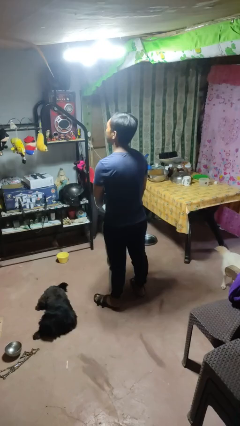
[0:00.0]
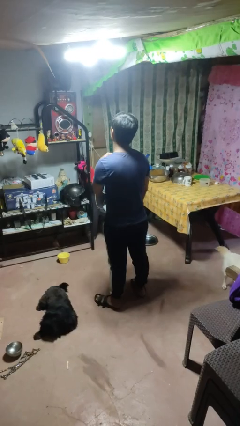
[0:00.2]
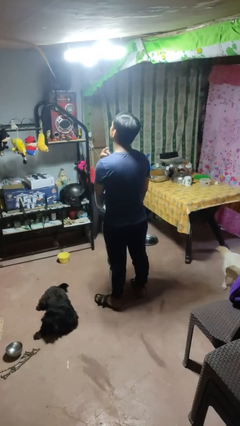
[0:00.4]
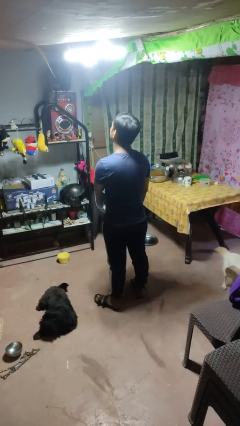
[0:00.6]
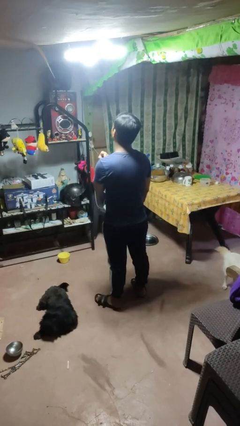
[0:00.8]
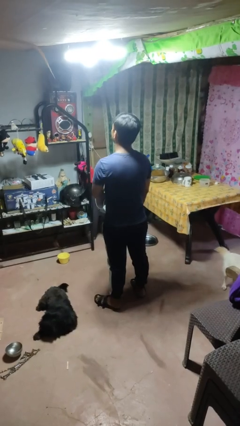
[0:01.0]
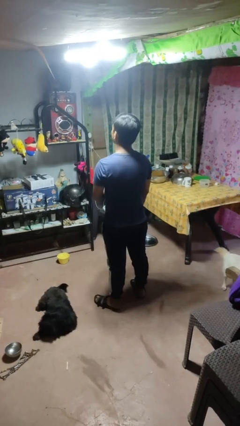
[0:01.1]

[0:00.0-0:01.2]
person gestures cut

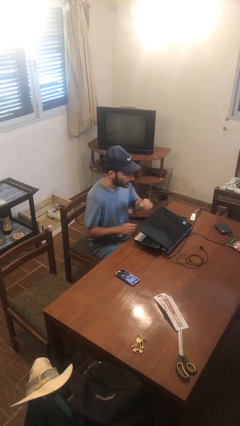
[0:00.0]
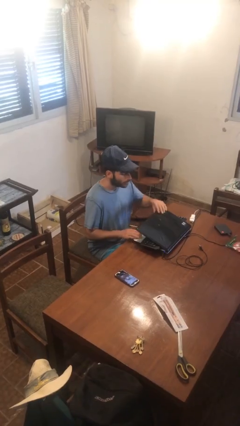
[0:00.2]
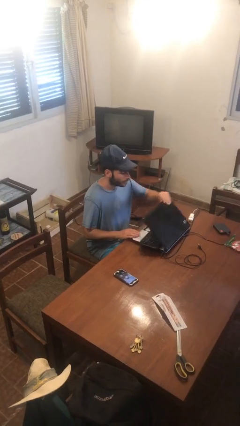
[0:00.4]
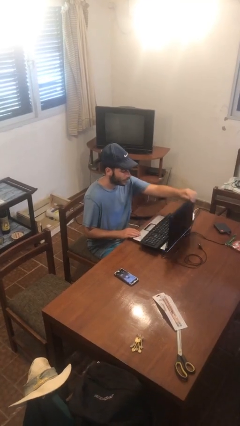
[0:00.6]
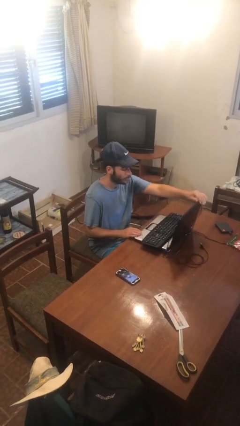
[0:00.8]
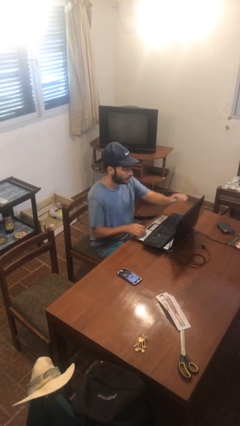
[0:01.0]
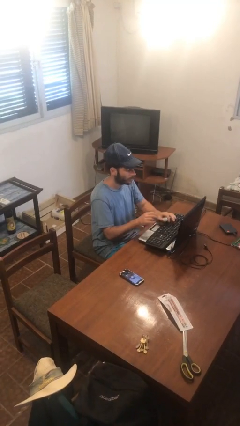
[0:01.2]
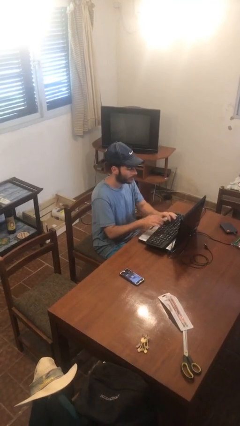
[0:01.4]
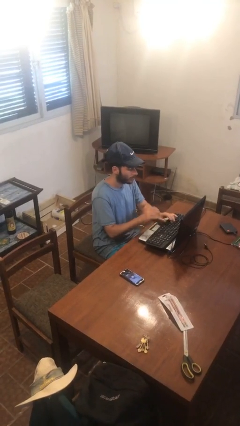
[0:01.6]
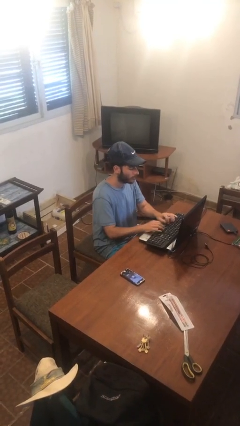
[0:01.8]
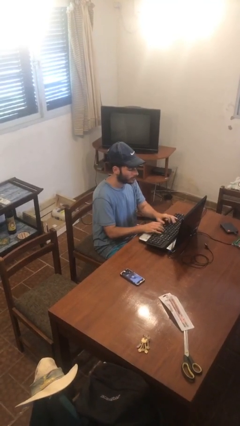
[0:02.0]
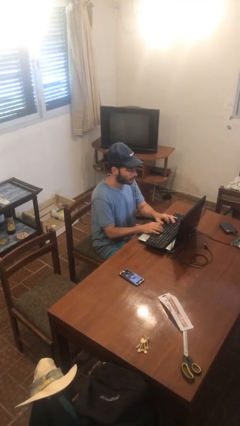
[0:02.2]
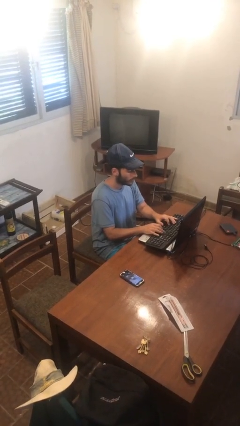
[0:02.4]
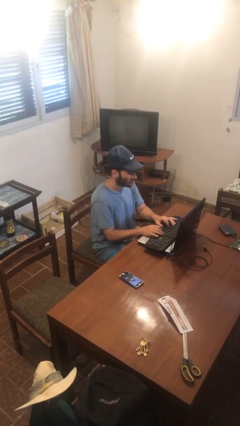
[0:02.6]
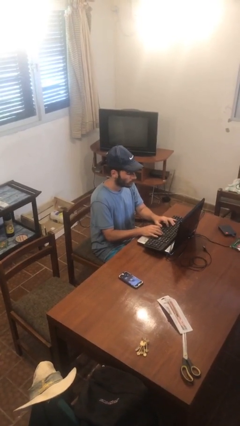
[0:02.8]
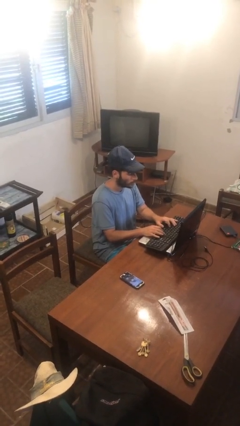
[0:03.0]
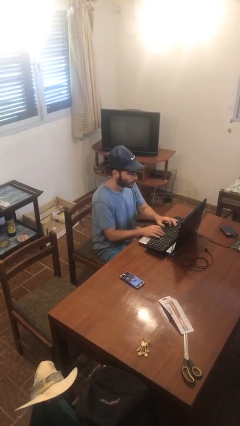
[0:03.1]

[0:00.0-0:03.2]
person interacts with laptop

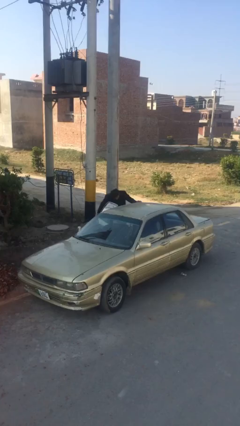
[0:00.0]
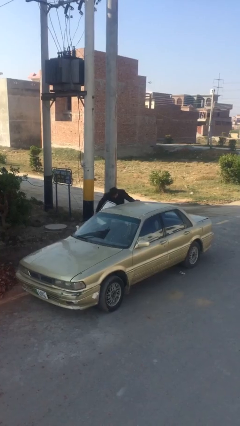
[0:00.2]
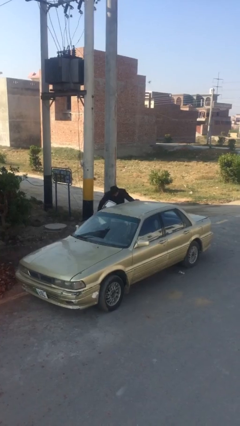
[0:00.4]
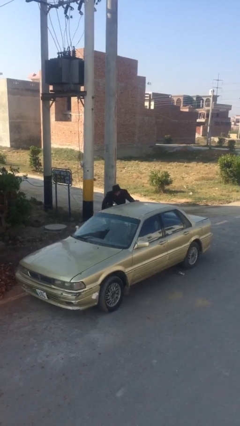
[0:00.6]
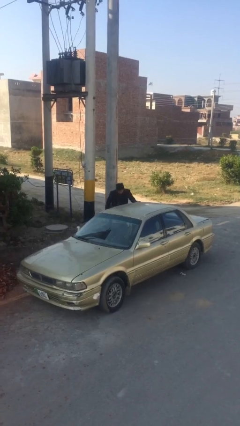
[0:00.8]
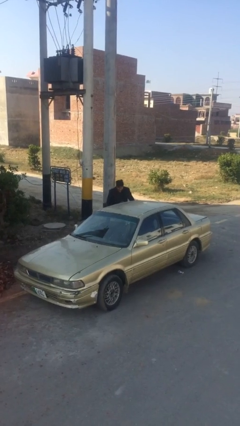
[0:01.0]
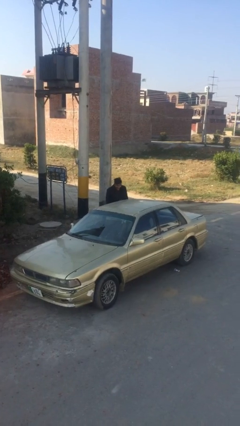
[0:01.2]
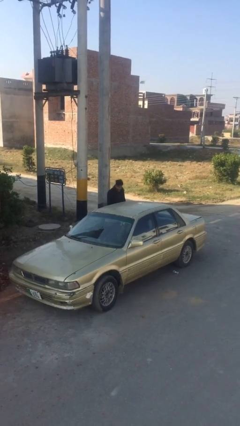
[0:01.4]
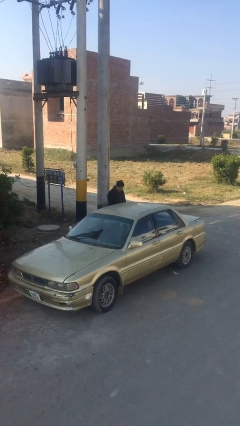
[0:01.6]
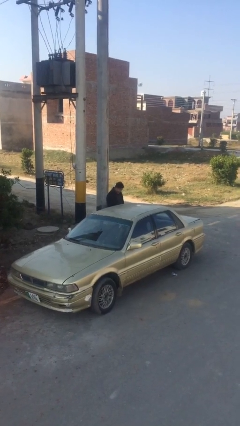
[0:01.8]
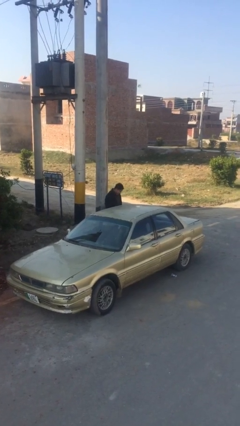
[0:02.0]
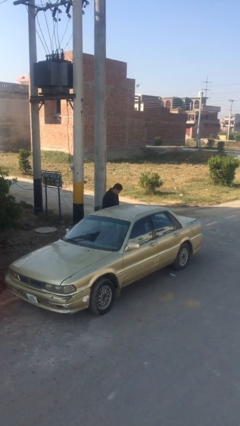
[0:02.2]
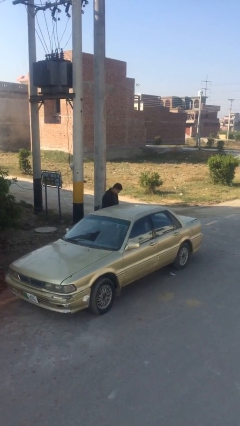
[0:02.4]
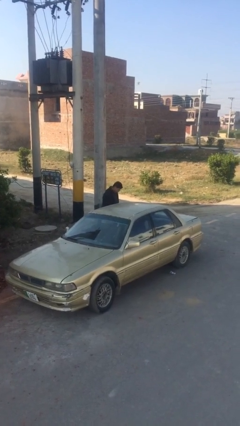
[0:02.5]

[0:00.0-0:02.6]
person closes car door

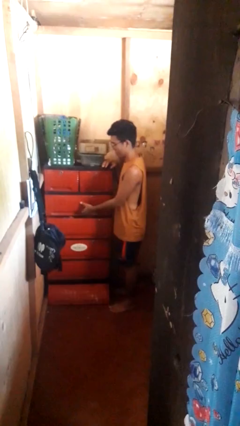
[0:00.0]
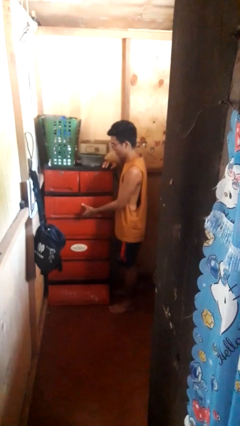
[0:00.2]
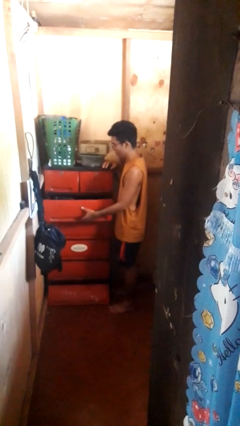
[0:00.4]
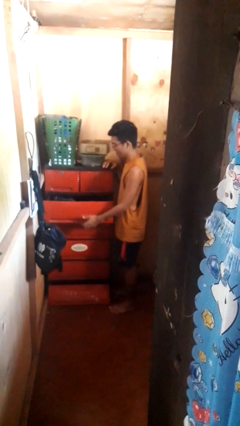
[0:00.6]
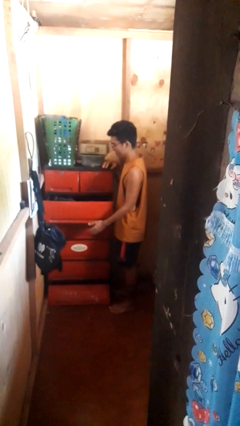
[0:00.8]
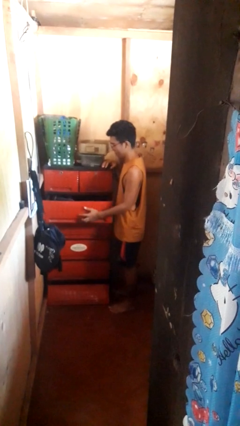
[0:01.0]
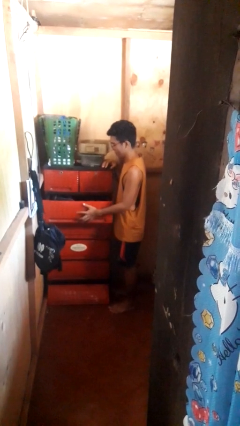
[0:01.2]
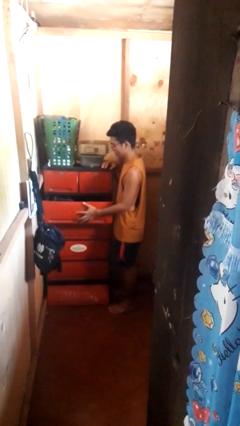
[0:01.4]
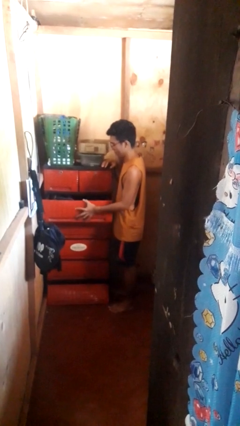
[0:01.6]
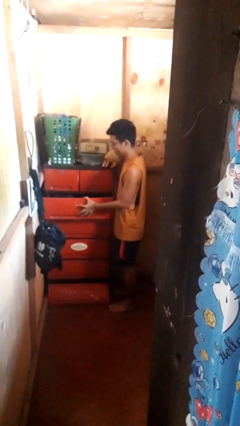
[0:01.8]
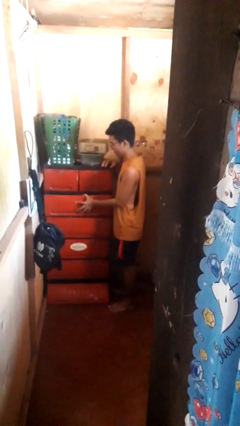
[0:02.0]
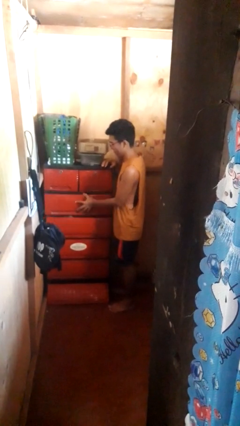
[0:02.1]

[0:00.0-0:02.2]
person opens dresser drawer

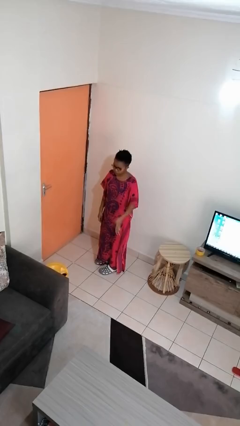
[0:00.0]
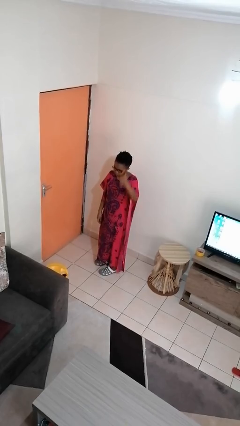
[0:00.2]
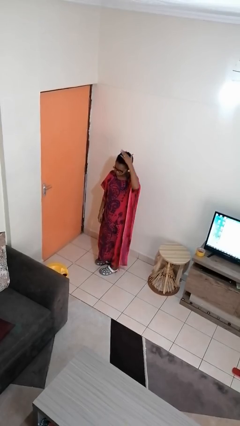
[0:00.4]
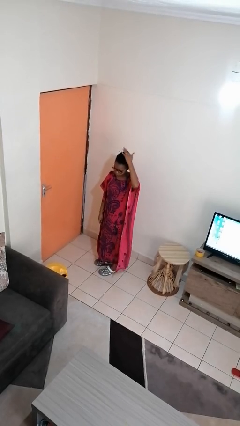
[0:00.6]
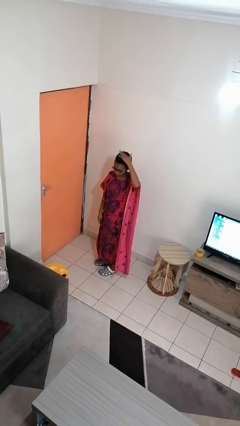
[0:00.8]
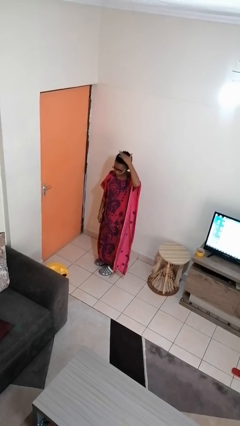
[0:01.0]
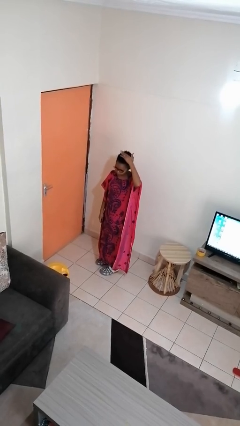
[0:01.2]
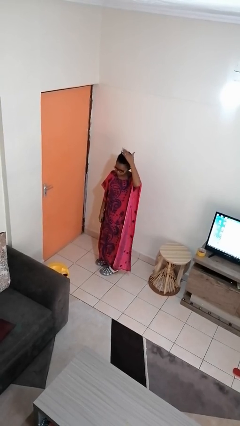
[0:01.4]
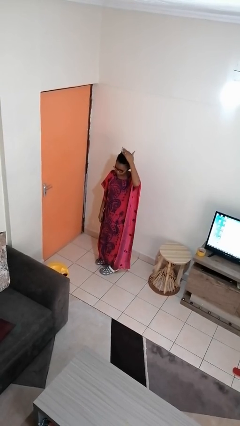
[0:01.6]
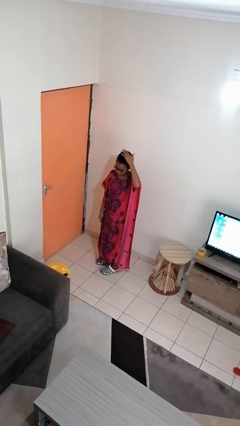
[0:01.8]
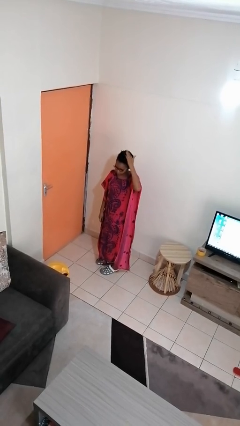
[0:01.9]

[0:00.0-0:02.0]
person pats head

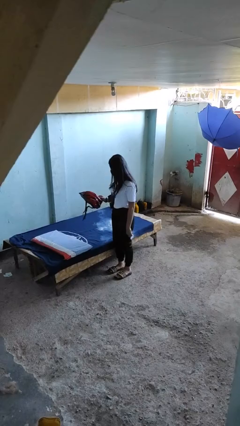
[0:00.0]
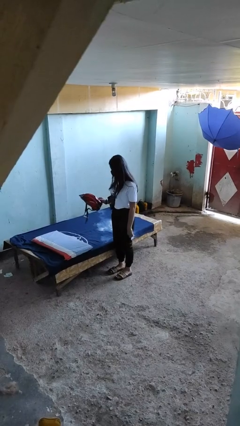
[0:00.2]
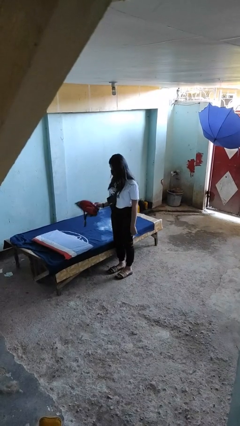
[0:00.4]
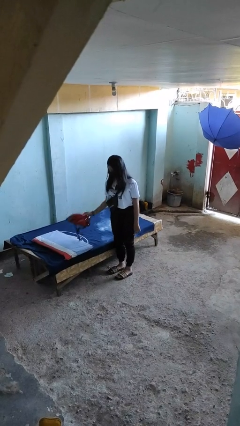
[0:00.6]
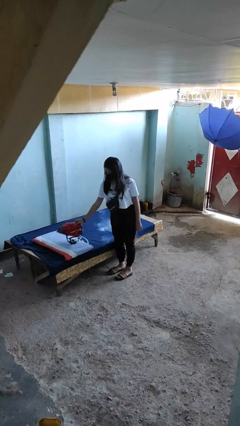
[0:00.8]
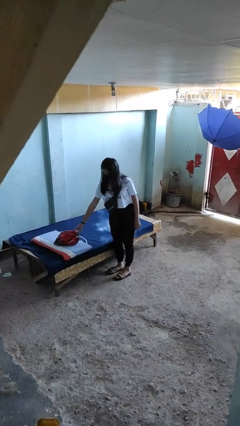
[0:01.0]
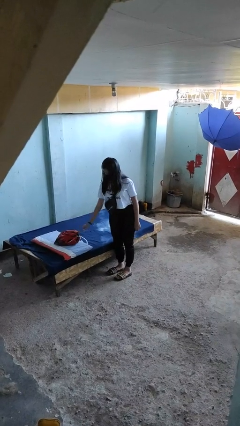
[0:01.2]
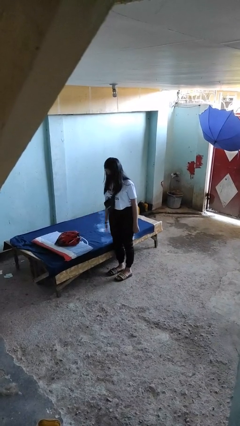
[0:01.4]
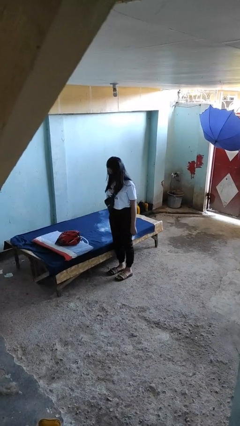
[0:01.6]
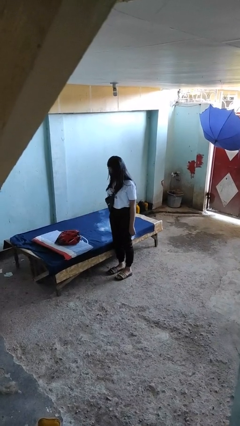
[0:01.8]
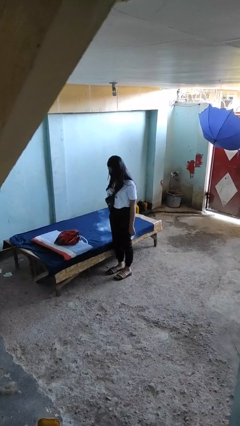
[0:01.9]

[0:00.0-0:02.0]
person puts down object on bed

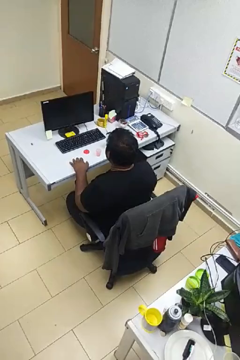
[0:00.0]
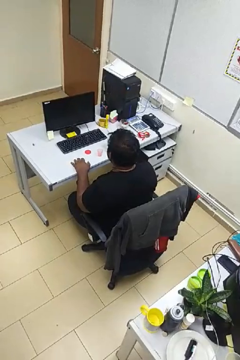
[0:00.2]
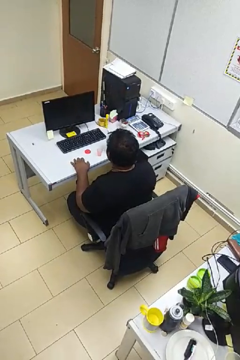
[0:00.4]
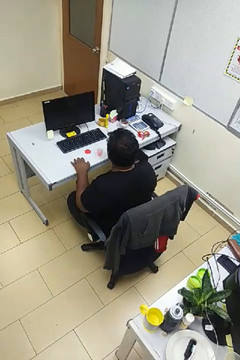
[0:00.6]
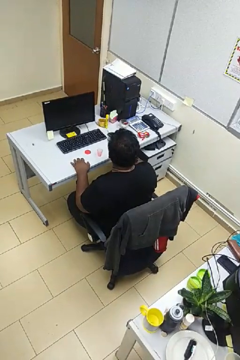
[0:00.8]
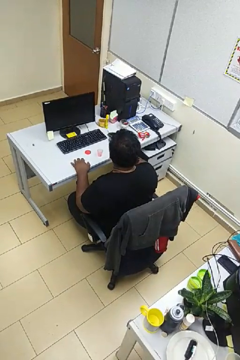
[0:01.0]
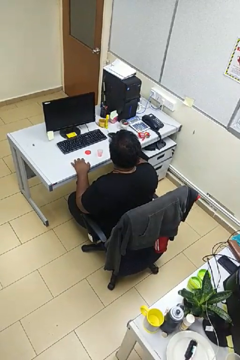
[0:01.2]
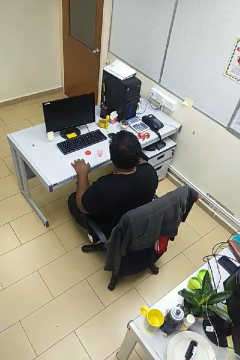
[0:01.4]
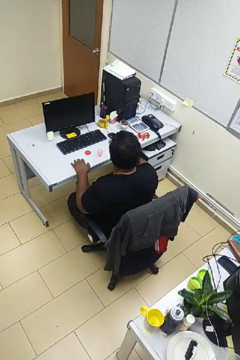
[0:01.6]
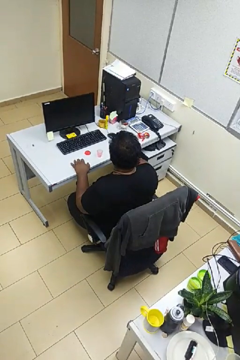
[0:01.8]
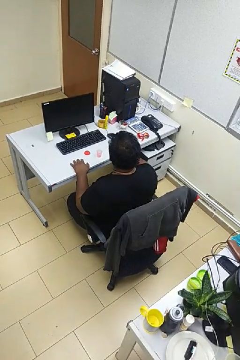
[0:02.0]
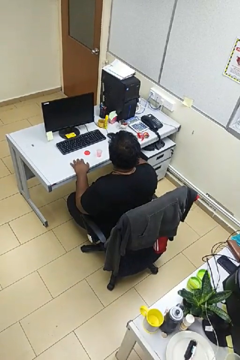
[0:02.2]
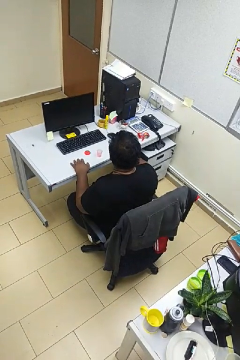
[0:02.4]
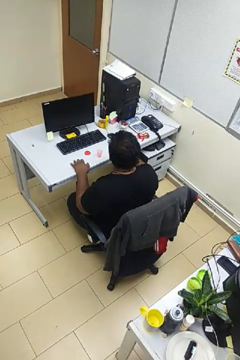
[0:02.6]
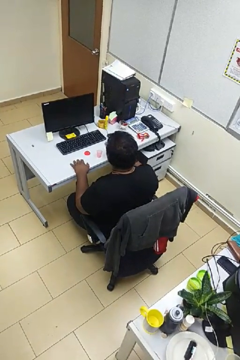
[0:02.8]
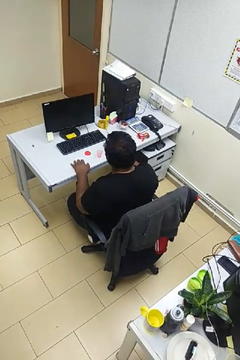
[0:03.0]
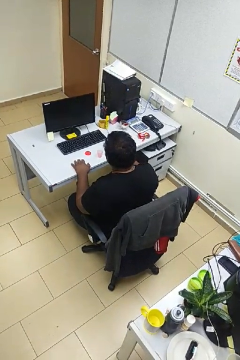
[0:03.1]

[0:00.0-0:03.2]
person drinks from cup

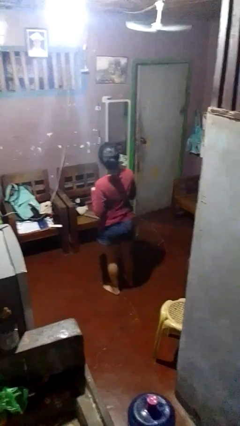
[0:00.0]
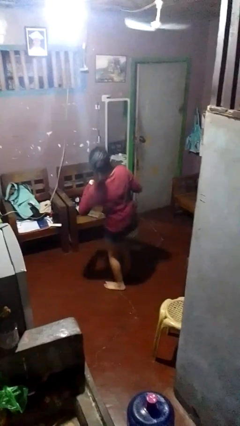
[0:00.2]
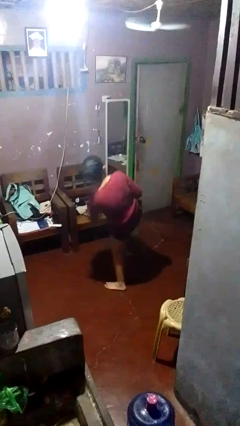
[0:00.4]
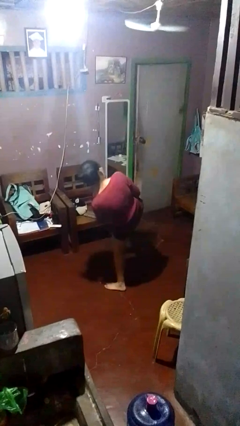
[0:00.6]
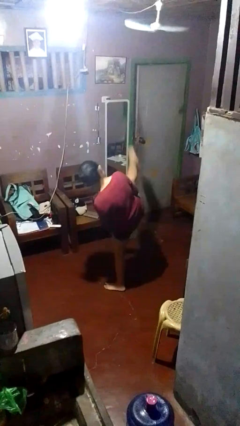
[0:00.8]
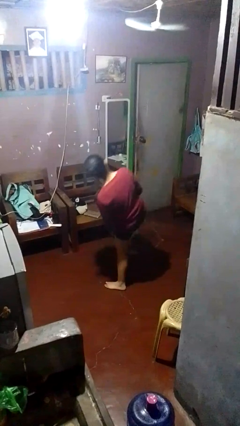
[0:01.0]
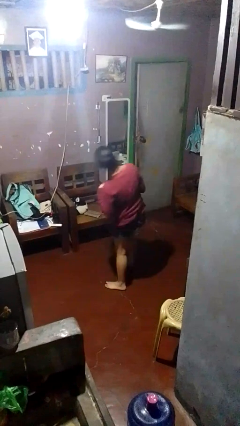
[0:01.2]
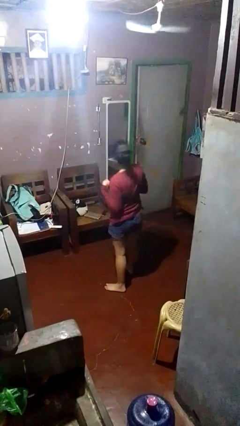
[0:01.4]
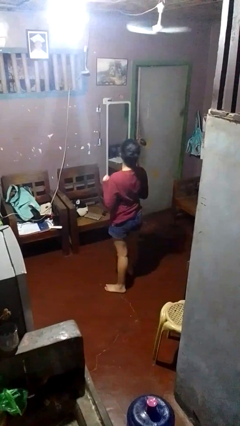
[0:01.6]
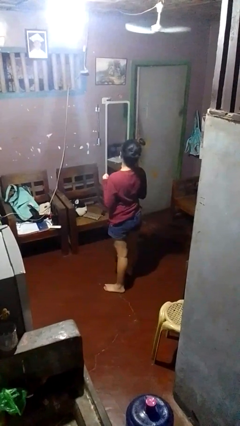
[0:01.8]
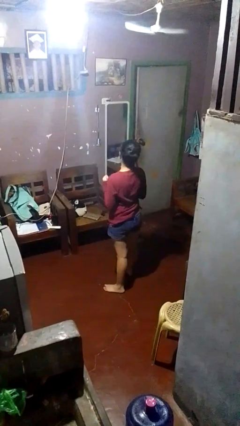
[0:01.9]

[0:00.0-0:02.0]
person karate kicks
